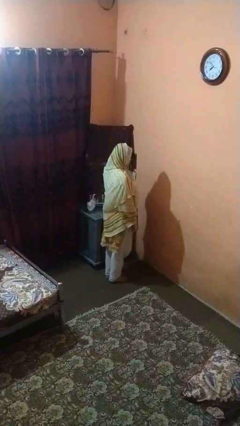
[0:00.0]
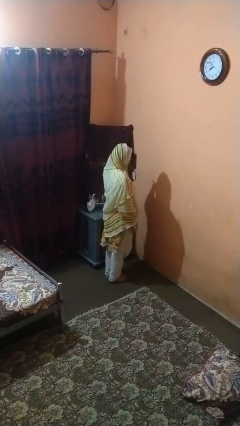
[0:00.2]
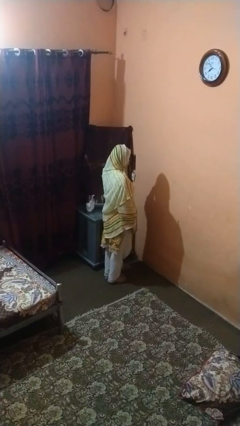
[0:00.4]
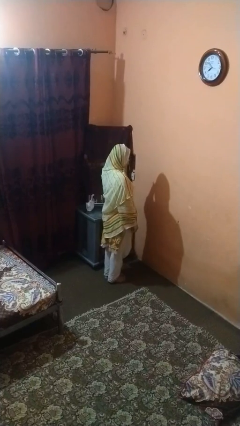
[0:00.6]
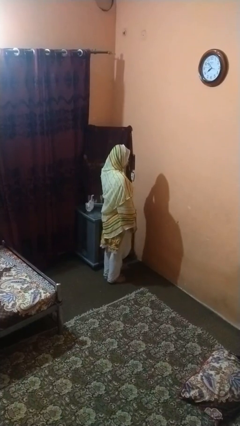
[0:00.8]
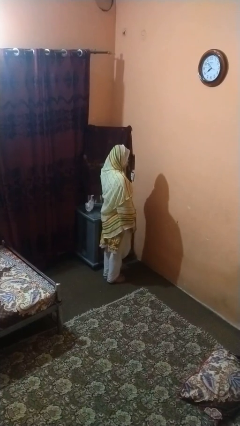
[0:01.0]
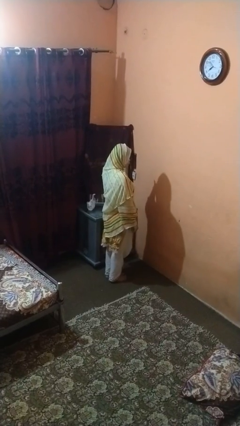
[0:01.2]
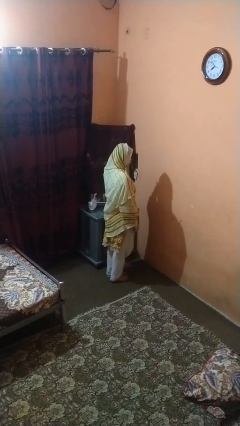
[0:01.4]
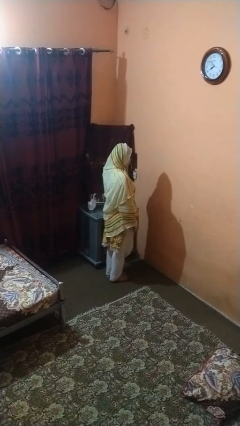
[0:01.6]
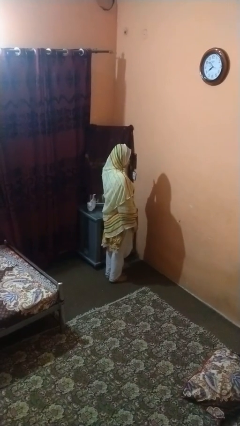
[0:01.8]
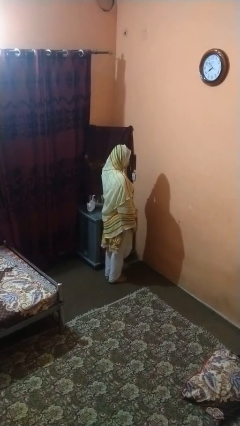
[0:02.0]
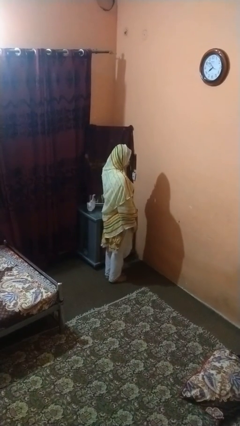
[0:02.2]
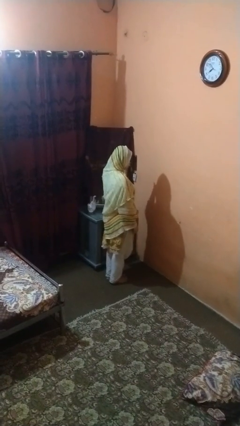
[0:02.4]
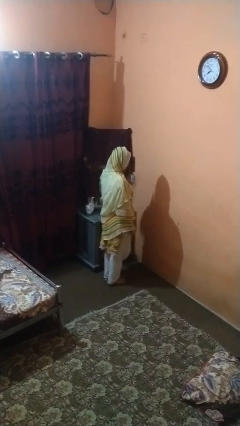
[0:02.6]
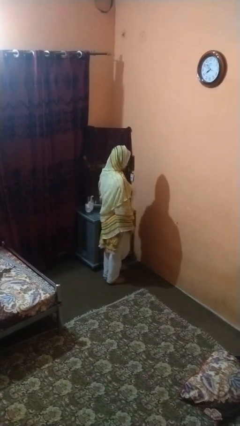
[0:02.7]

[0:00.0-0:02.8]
person rubs eyes

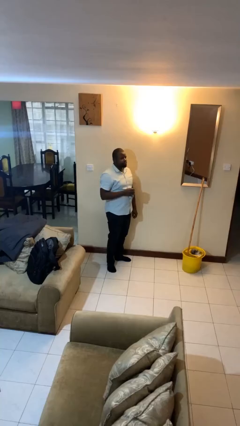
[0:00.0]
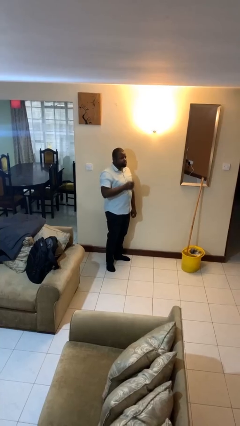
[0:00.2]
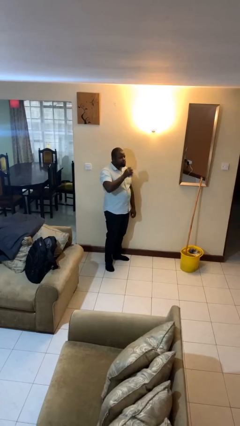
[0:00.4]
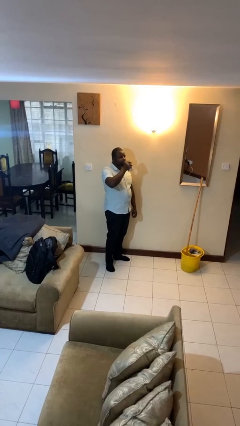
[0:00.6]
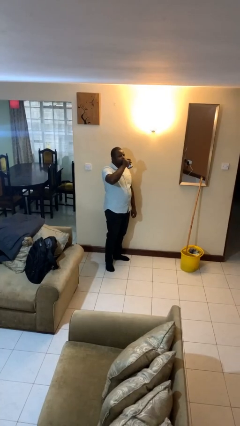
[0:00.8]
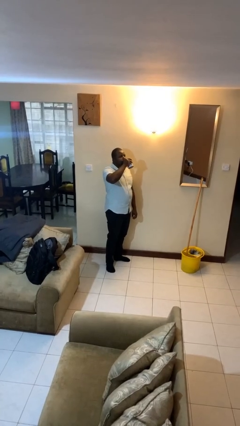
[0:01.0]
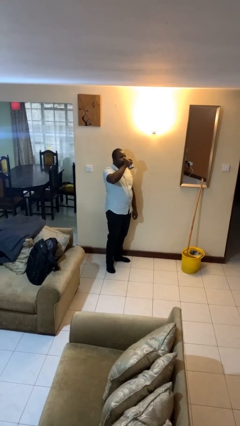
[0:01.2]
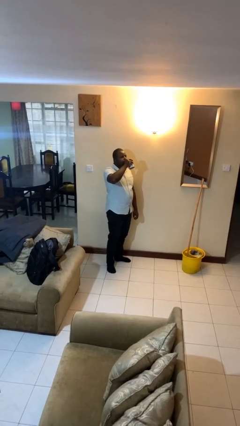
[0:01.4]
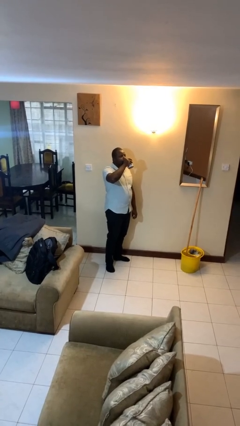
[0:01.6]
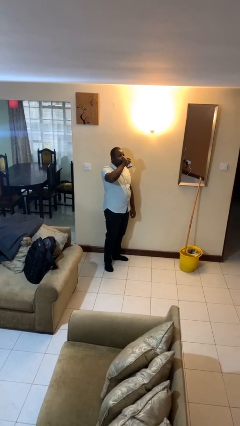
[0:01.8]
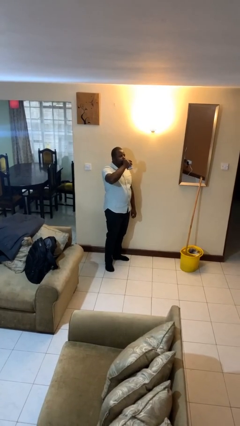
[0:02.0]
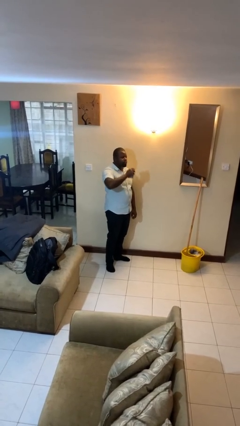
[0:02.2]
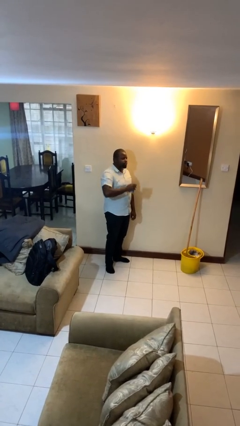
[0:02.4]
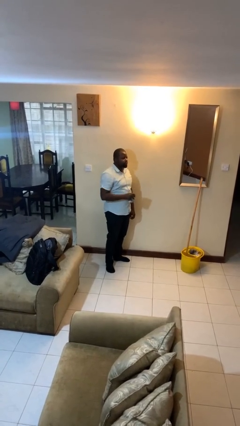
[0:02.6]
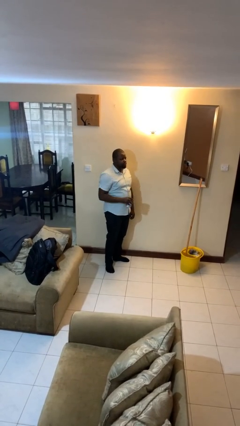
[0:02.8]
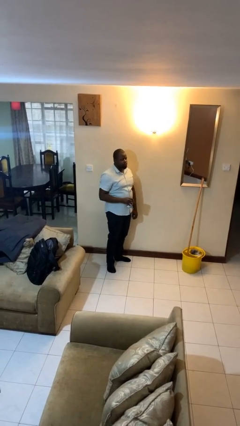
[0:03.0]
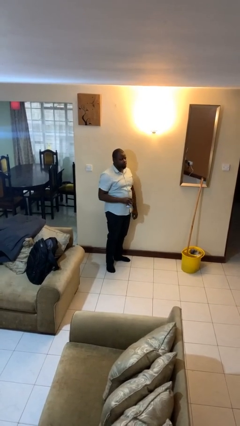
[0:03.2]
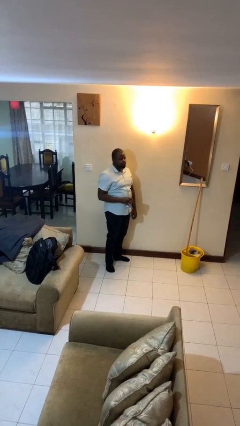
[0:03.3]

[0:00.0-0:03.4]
person drinks from beverage can

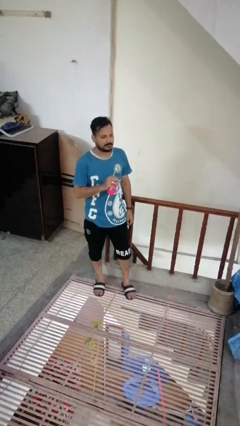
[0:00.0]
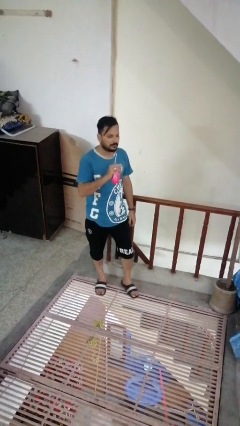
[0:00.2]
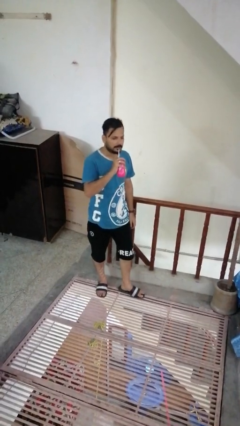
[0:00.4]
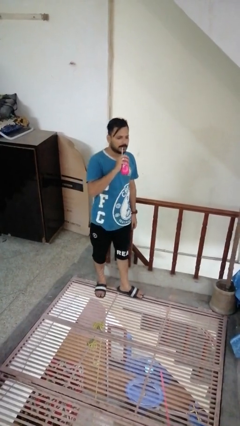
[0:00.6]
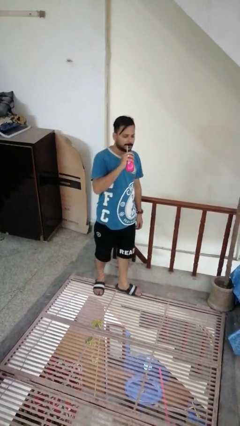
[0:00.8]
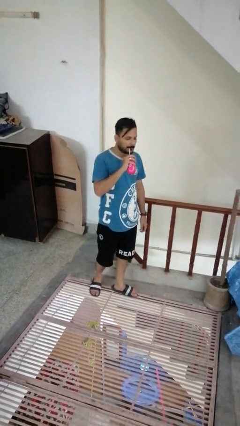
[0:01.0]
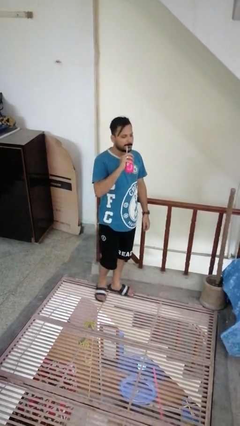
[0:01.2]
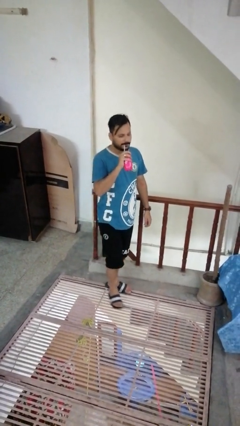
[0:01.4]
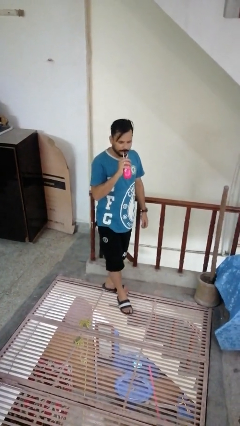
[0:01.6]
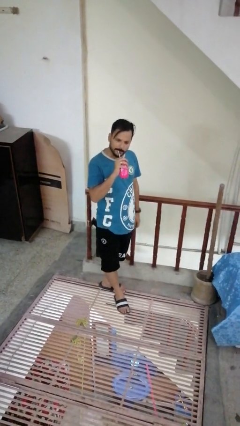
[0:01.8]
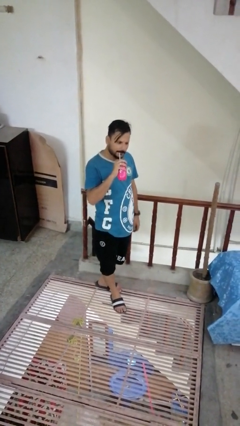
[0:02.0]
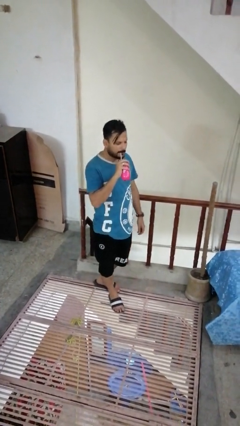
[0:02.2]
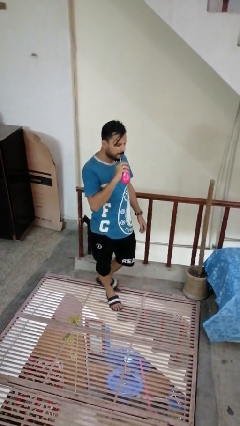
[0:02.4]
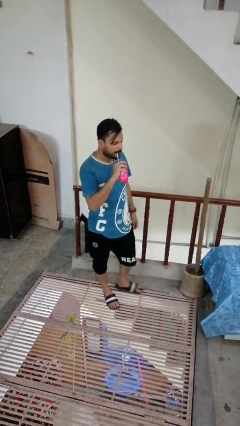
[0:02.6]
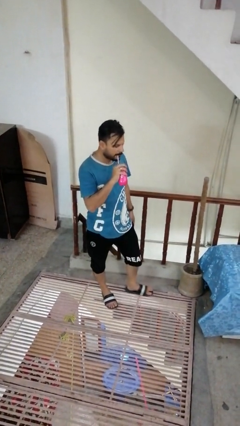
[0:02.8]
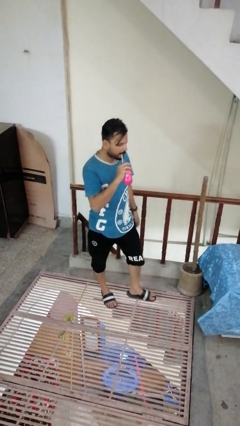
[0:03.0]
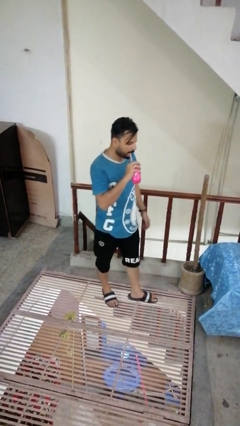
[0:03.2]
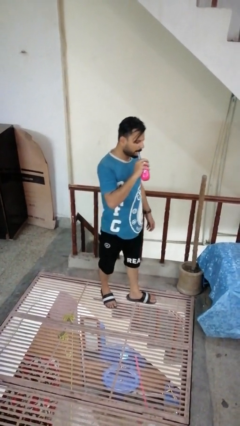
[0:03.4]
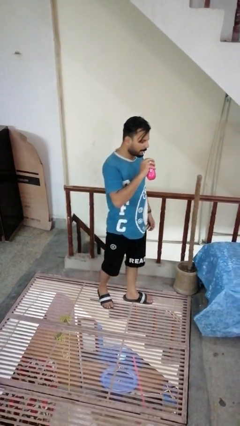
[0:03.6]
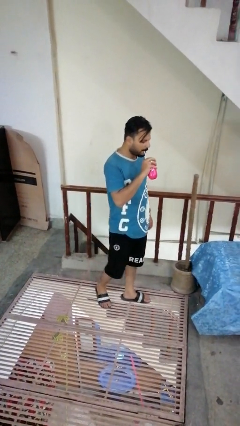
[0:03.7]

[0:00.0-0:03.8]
person drinks from straw

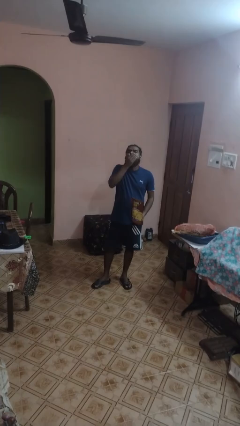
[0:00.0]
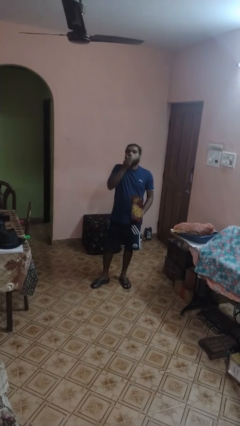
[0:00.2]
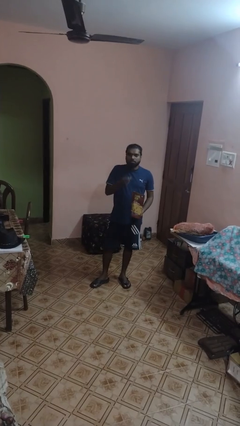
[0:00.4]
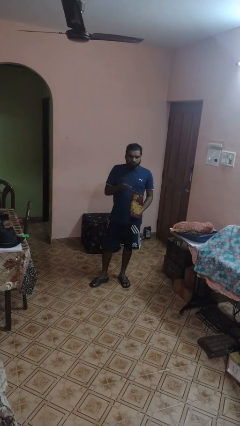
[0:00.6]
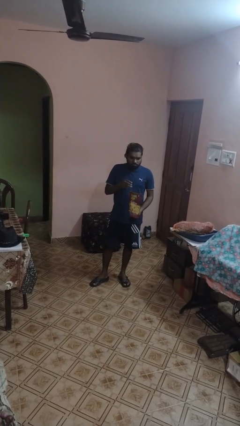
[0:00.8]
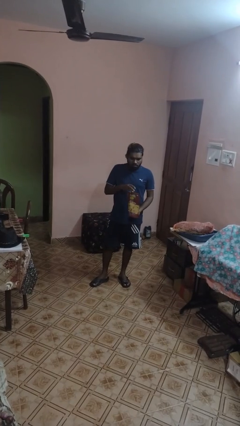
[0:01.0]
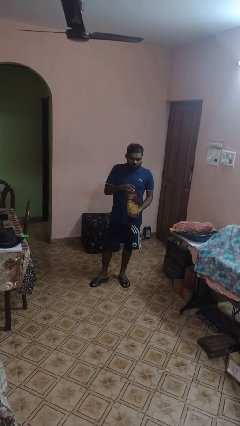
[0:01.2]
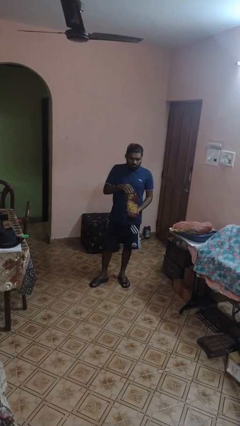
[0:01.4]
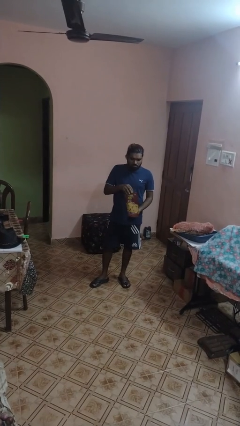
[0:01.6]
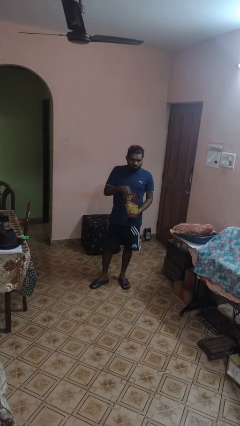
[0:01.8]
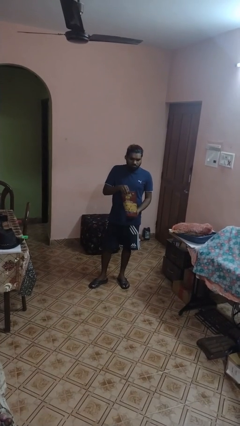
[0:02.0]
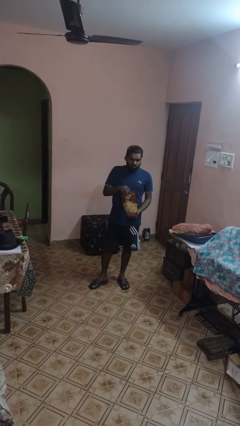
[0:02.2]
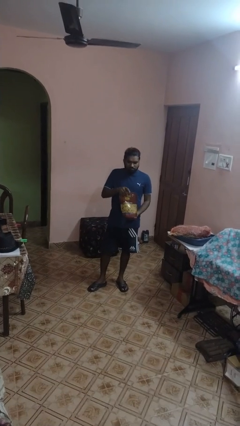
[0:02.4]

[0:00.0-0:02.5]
person eats snack from bag

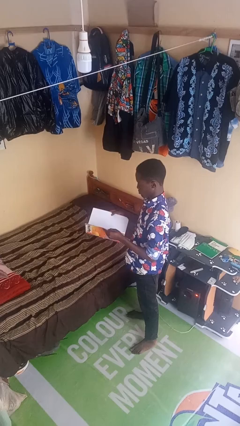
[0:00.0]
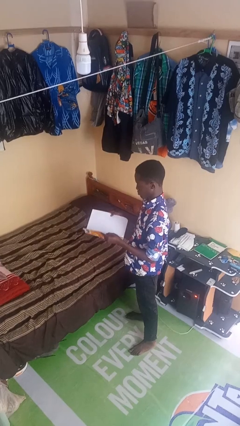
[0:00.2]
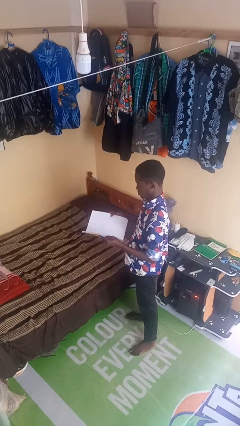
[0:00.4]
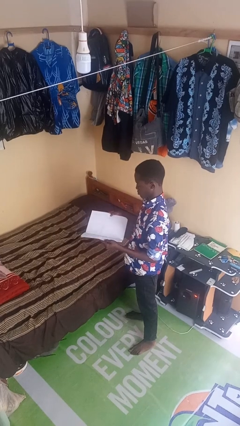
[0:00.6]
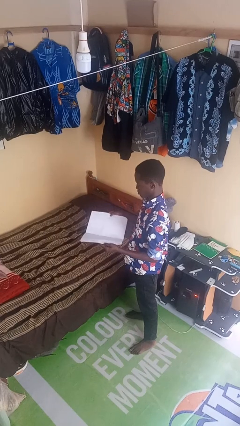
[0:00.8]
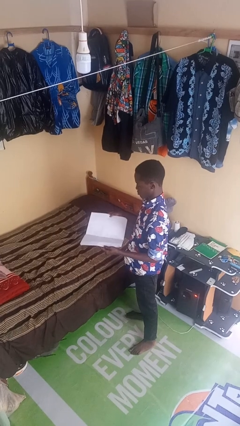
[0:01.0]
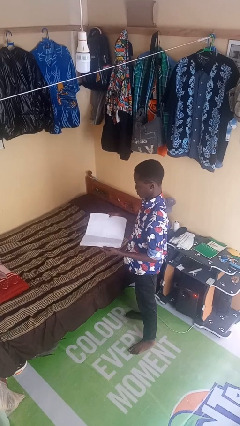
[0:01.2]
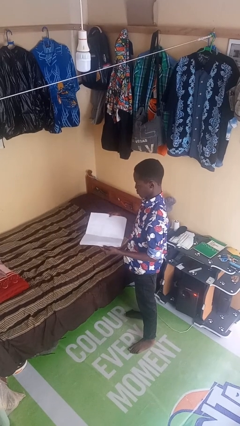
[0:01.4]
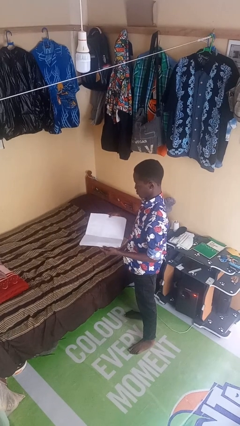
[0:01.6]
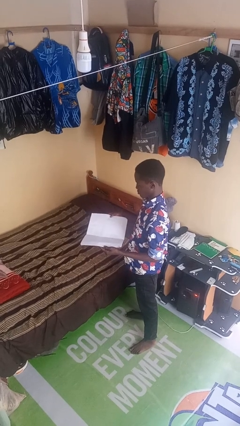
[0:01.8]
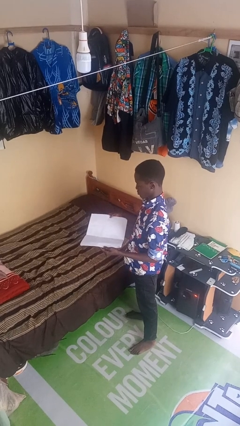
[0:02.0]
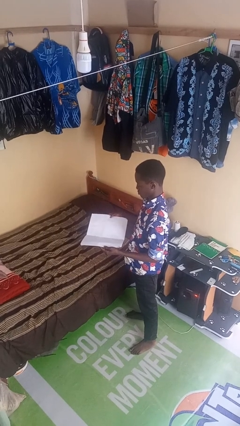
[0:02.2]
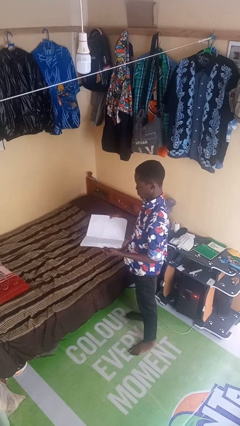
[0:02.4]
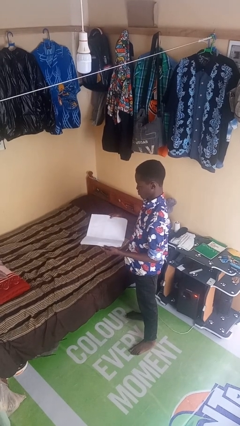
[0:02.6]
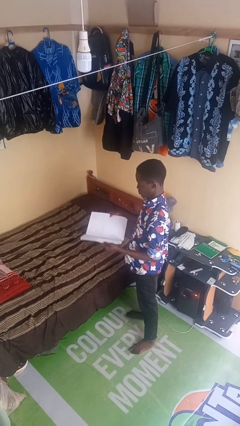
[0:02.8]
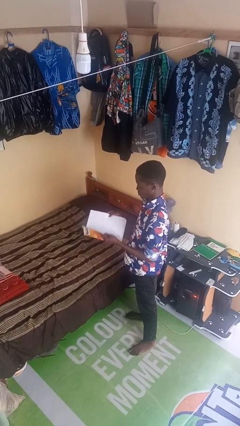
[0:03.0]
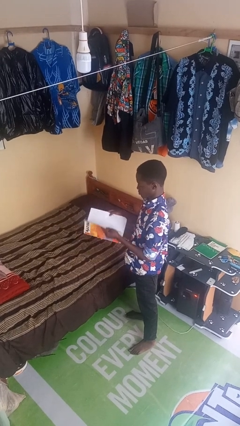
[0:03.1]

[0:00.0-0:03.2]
person reads book

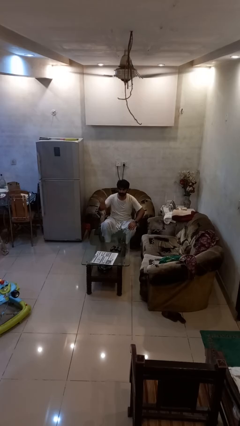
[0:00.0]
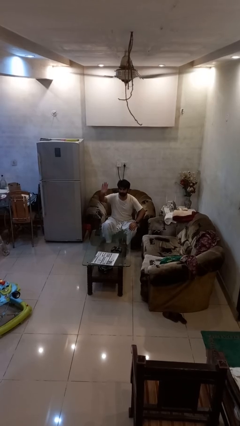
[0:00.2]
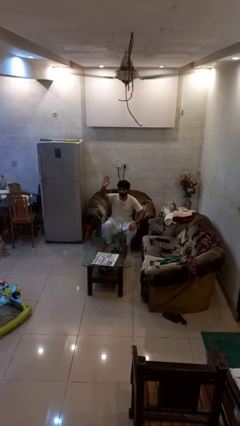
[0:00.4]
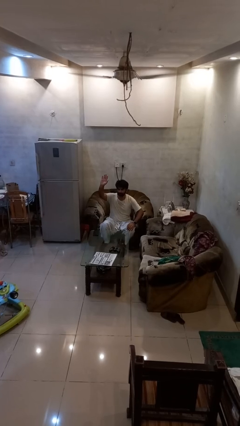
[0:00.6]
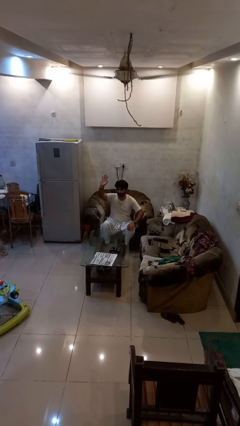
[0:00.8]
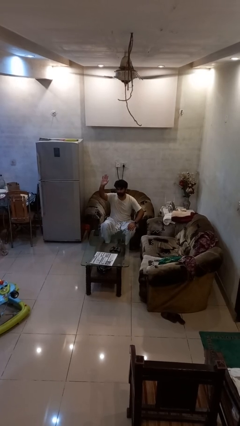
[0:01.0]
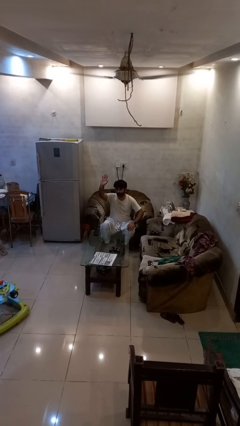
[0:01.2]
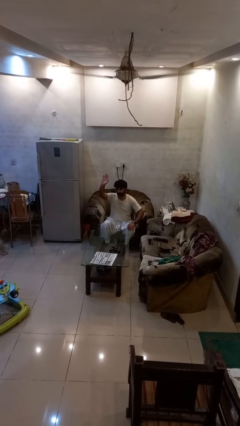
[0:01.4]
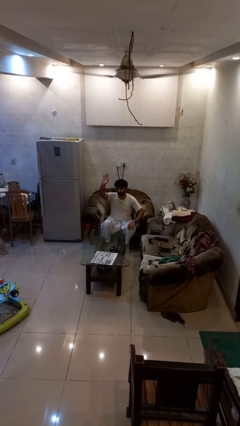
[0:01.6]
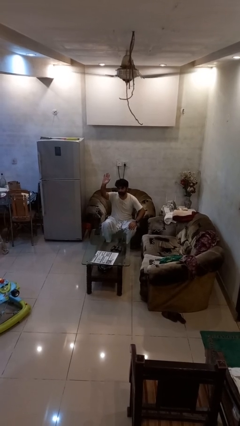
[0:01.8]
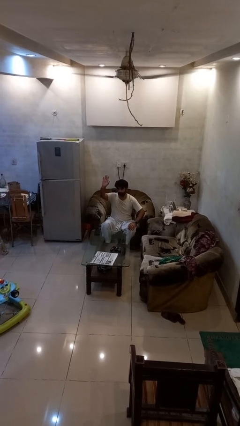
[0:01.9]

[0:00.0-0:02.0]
person gestures raise hand

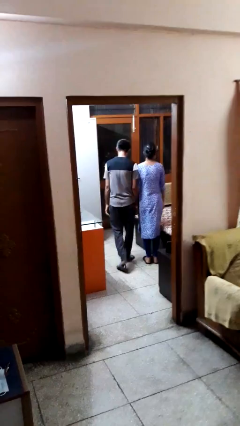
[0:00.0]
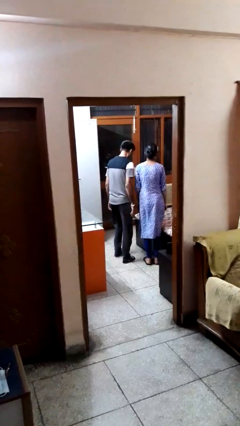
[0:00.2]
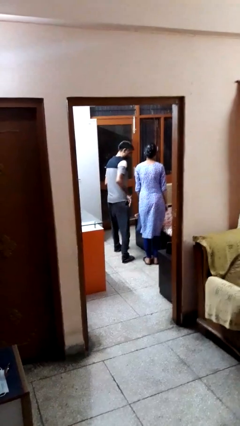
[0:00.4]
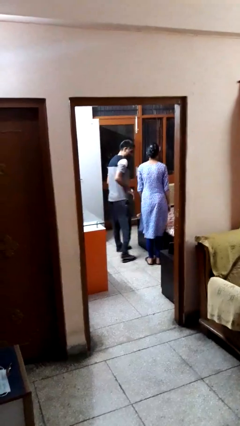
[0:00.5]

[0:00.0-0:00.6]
person bumps into person
